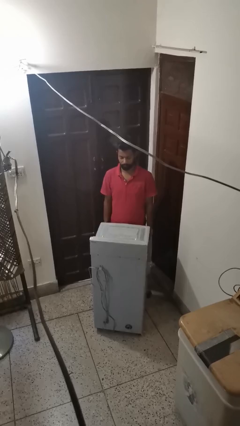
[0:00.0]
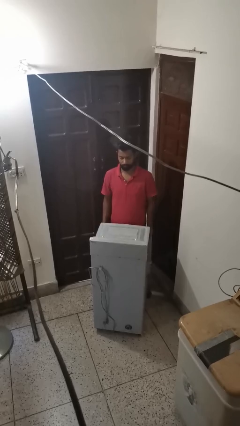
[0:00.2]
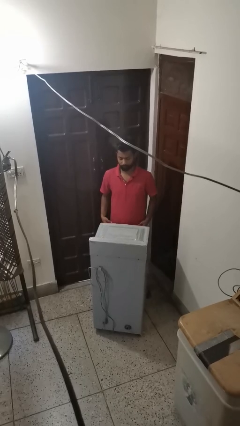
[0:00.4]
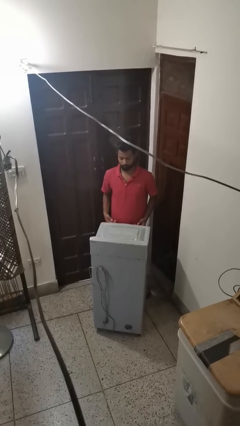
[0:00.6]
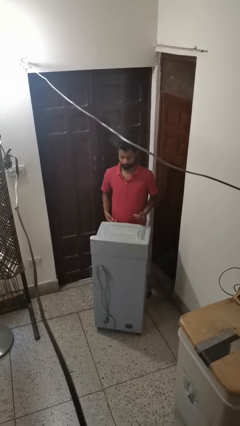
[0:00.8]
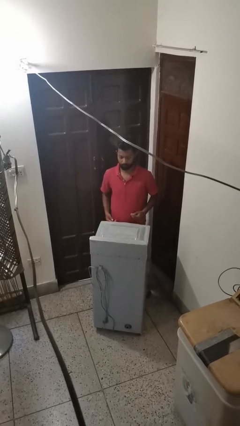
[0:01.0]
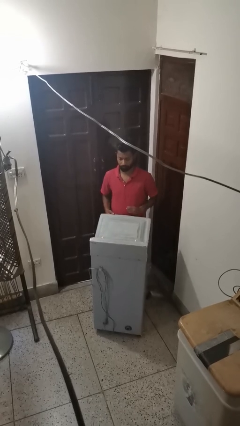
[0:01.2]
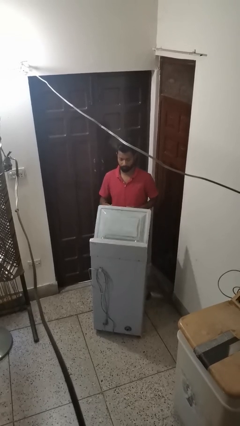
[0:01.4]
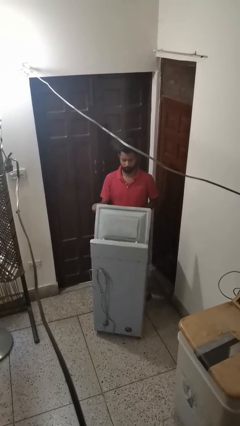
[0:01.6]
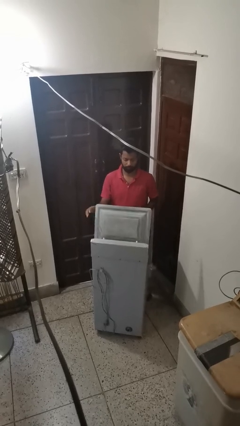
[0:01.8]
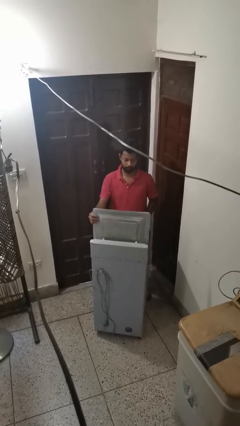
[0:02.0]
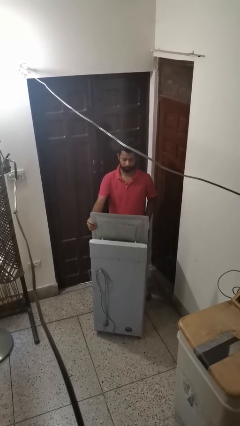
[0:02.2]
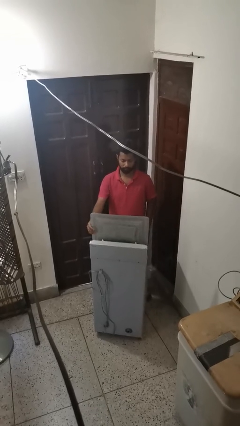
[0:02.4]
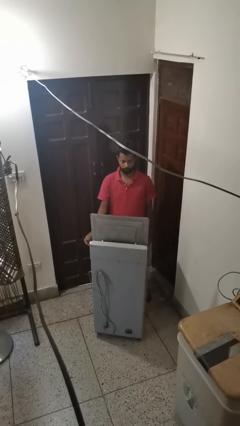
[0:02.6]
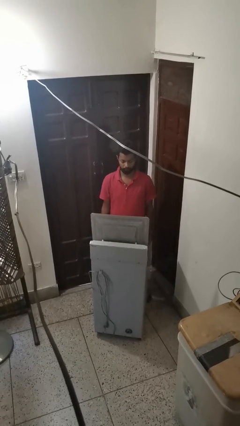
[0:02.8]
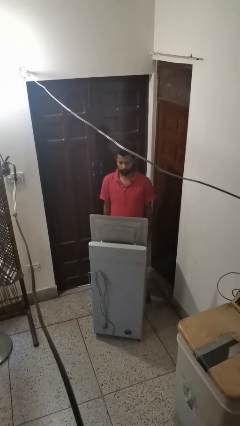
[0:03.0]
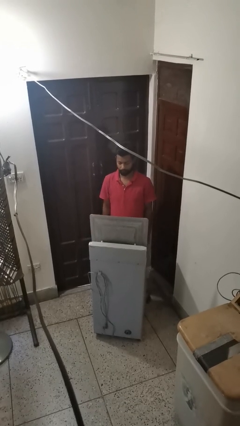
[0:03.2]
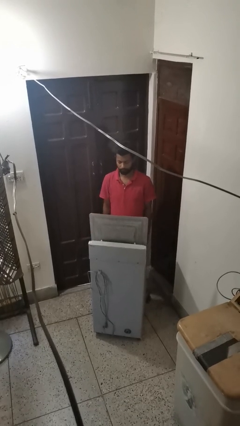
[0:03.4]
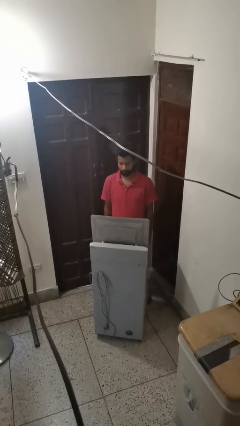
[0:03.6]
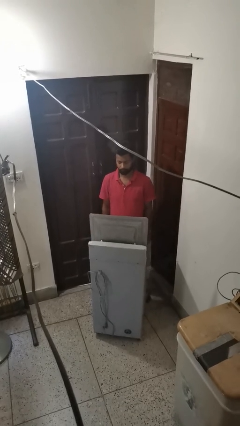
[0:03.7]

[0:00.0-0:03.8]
person opens clothes washer

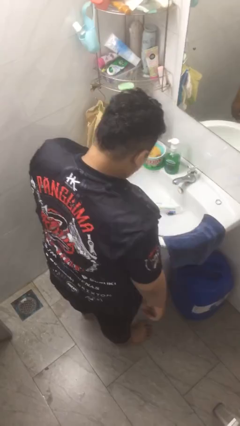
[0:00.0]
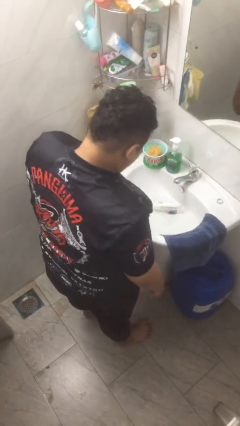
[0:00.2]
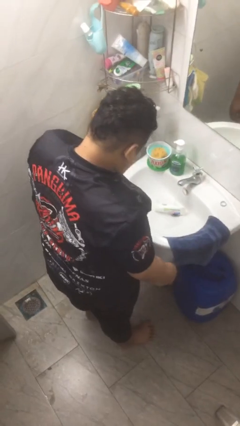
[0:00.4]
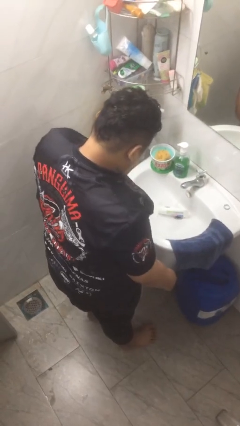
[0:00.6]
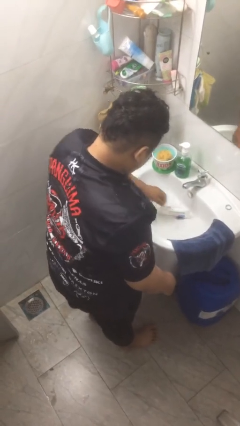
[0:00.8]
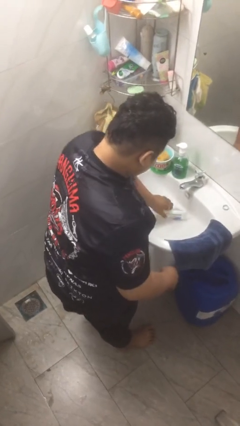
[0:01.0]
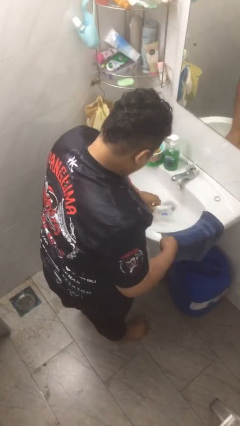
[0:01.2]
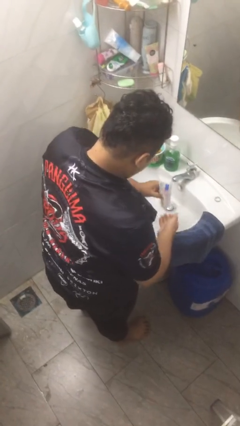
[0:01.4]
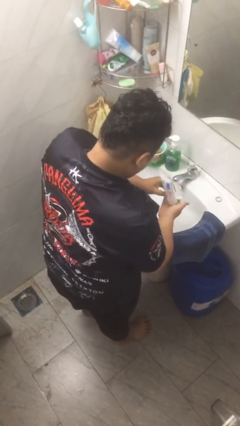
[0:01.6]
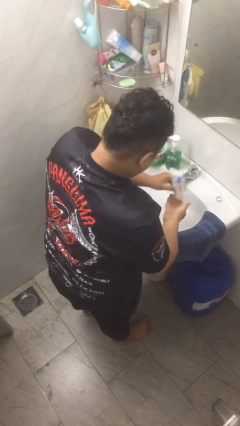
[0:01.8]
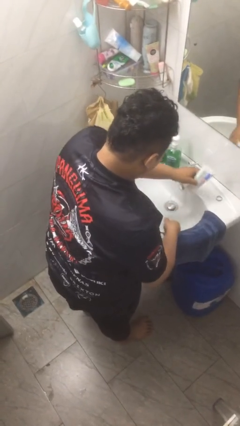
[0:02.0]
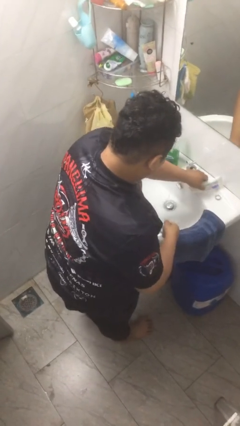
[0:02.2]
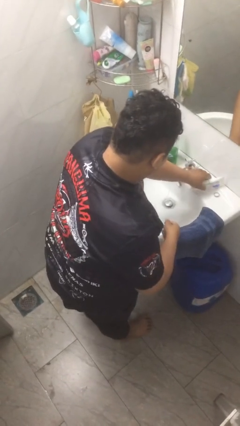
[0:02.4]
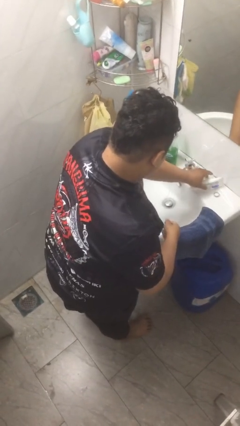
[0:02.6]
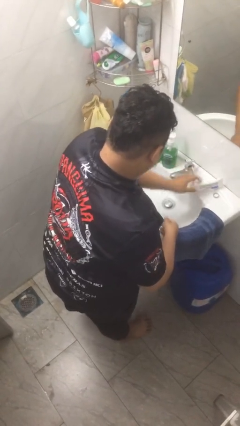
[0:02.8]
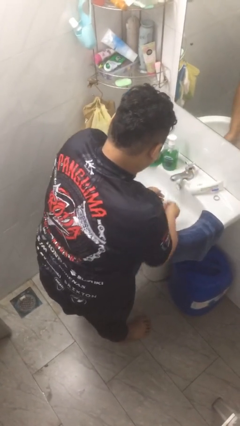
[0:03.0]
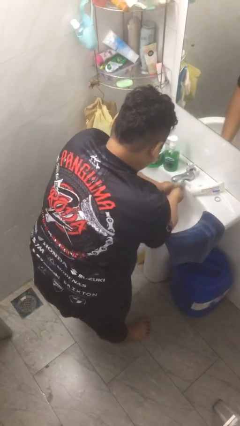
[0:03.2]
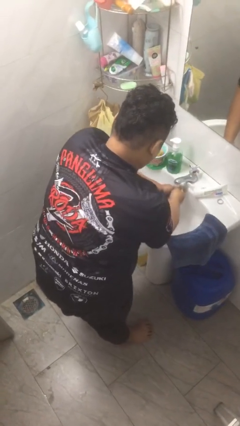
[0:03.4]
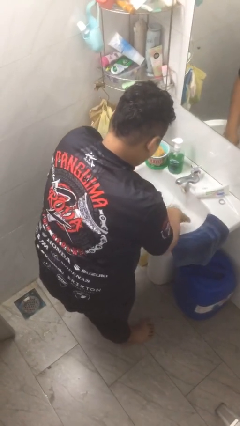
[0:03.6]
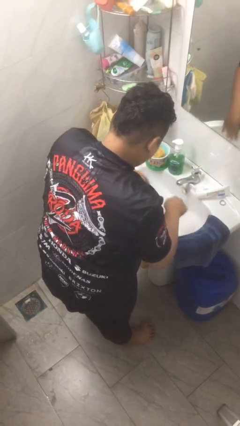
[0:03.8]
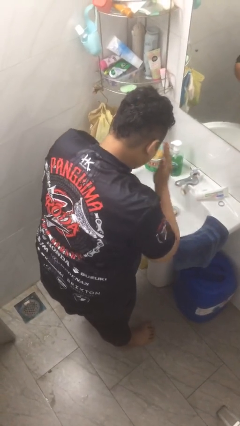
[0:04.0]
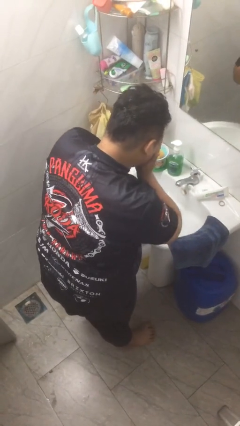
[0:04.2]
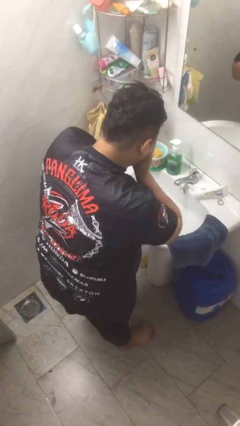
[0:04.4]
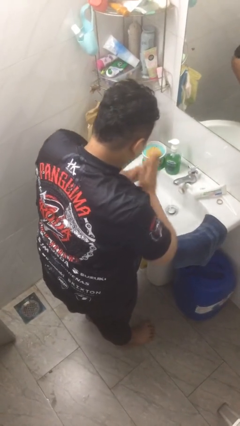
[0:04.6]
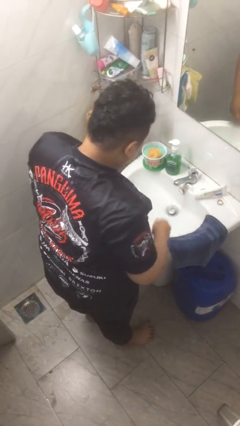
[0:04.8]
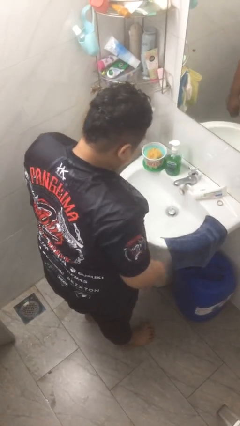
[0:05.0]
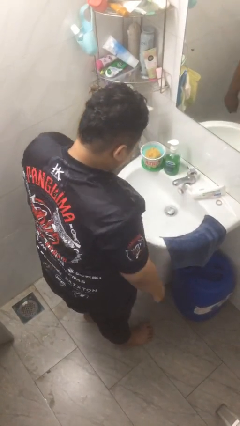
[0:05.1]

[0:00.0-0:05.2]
person washes face

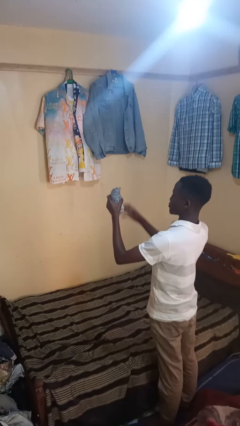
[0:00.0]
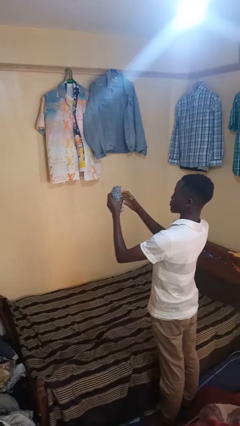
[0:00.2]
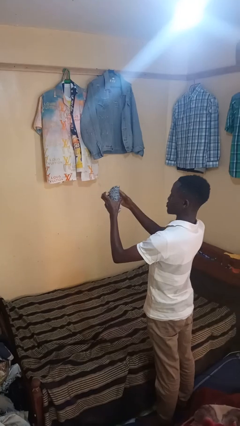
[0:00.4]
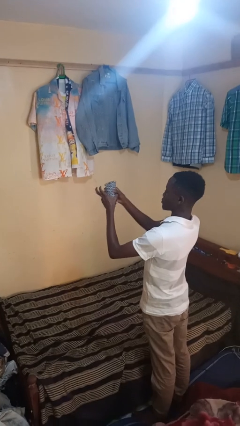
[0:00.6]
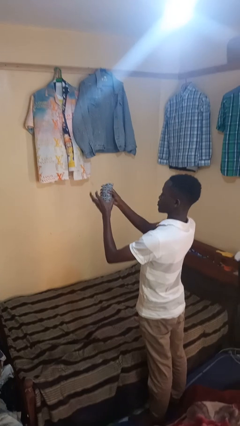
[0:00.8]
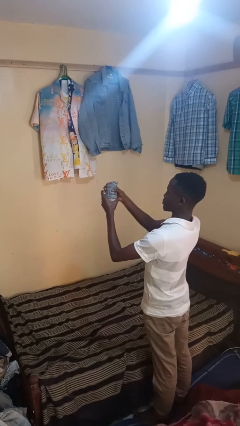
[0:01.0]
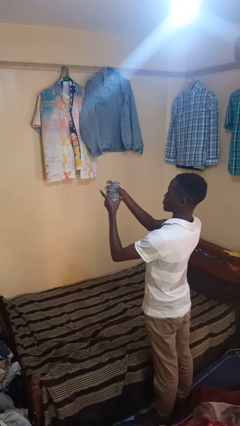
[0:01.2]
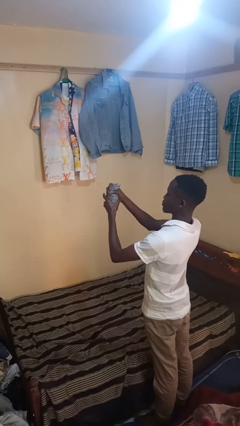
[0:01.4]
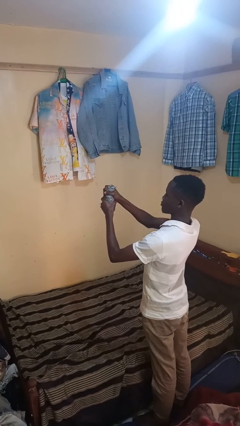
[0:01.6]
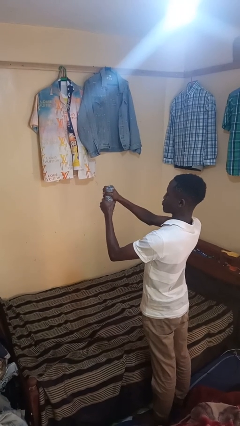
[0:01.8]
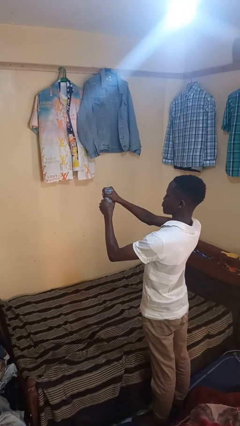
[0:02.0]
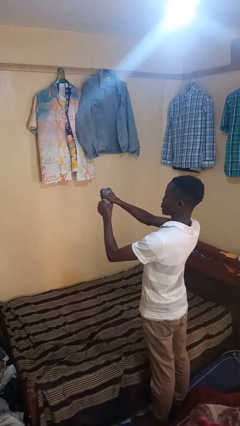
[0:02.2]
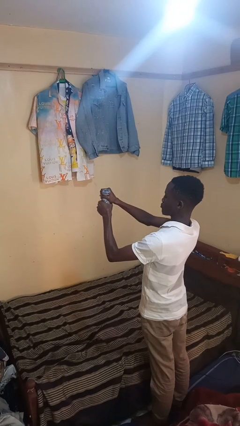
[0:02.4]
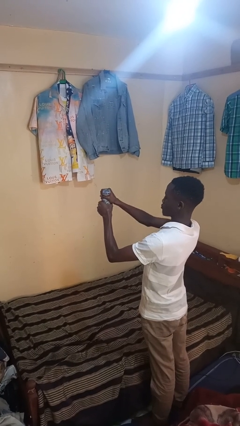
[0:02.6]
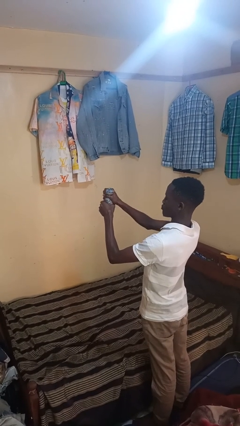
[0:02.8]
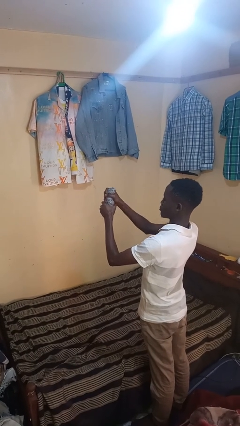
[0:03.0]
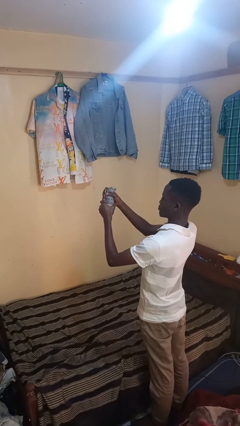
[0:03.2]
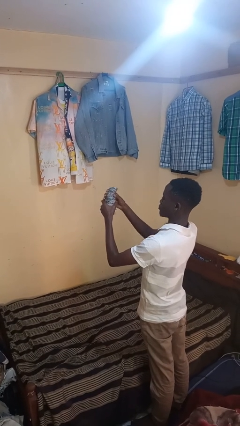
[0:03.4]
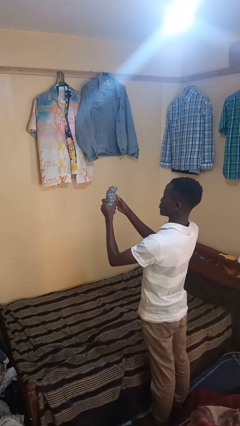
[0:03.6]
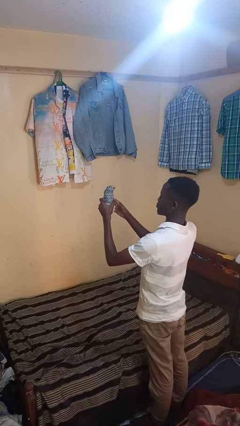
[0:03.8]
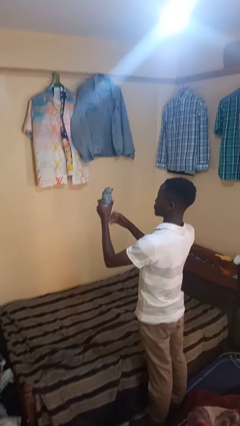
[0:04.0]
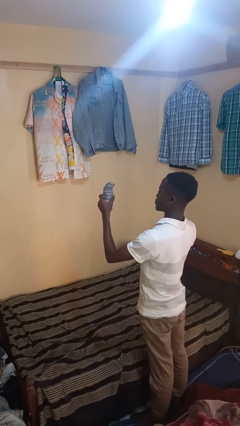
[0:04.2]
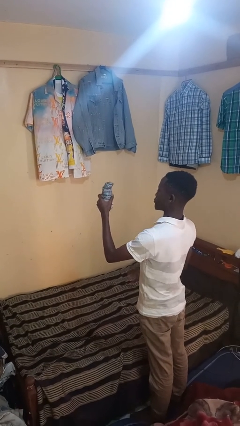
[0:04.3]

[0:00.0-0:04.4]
person squeezes object

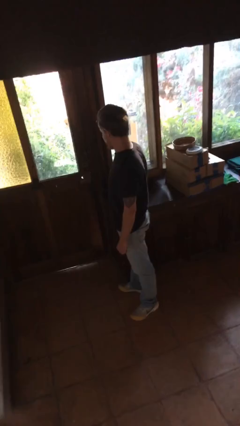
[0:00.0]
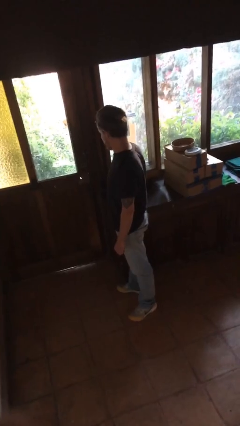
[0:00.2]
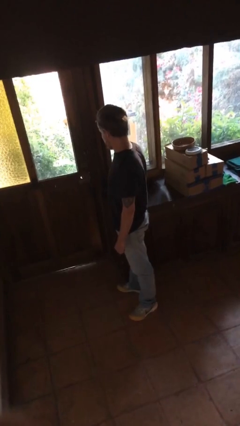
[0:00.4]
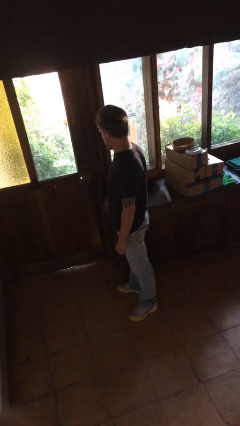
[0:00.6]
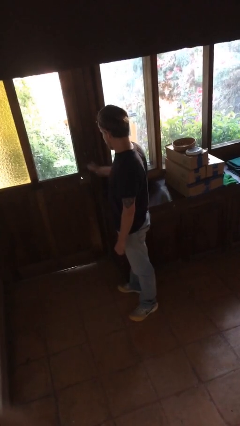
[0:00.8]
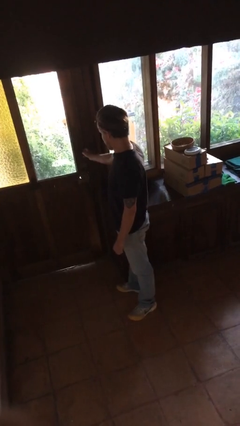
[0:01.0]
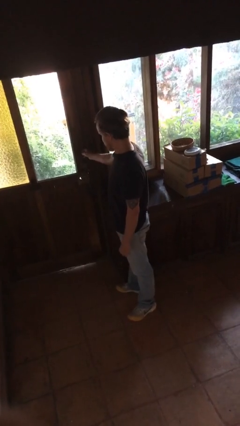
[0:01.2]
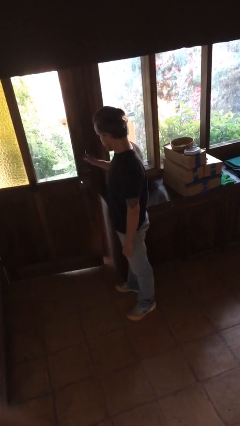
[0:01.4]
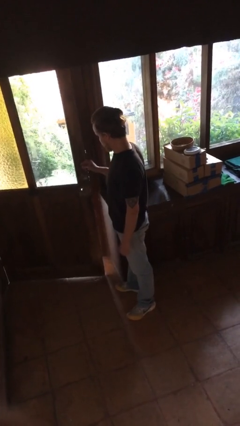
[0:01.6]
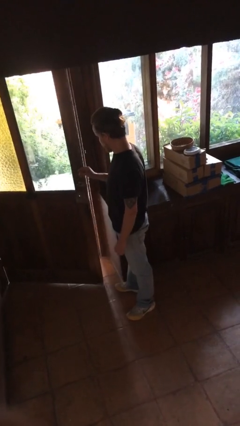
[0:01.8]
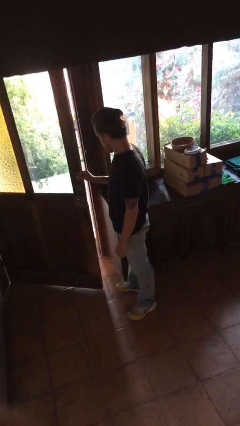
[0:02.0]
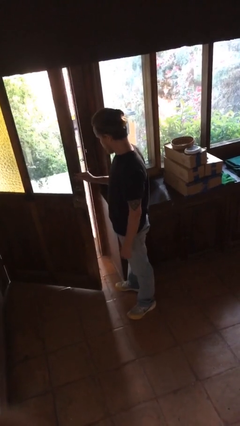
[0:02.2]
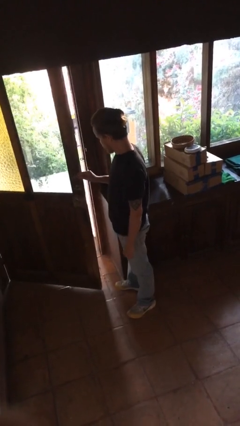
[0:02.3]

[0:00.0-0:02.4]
person opens facility door

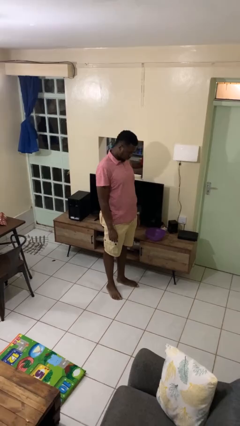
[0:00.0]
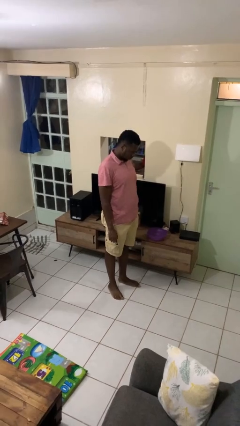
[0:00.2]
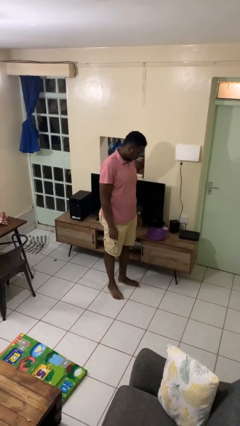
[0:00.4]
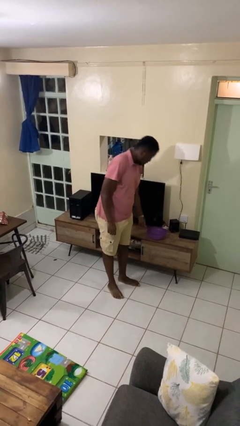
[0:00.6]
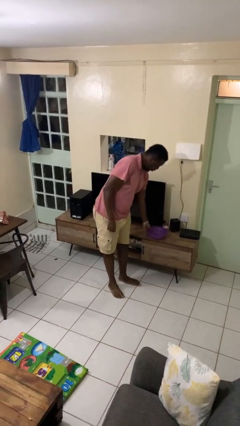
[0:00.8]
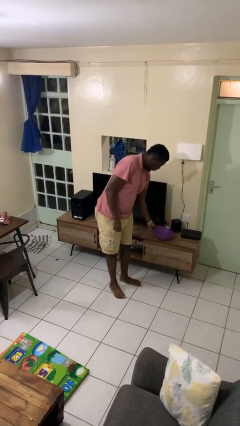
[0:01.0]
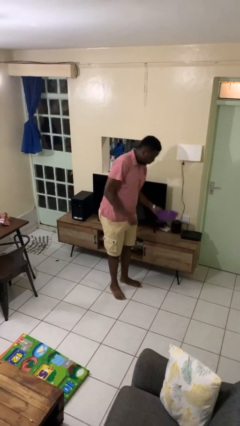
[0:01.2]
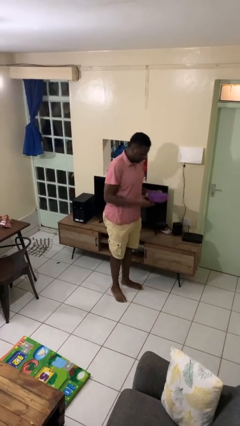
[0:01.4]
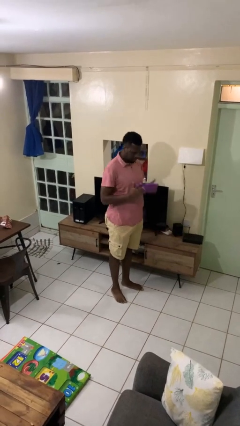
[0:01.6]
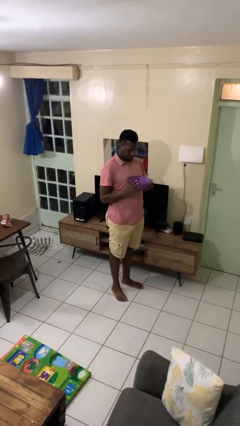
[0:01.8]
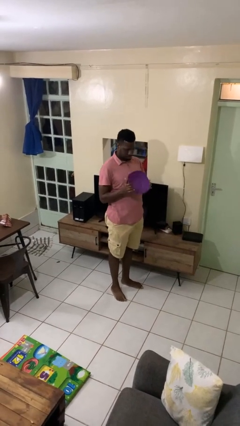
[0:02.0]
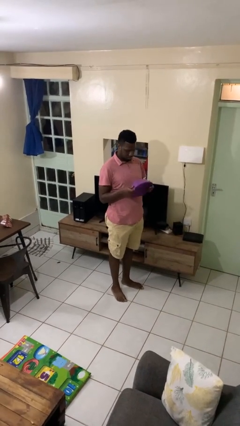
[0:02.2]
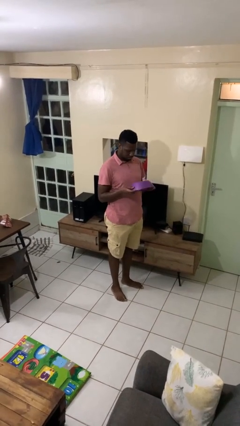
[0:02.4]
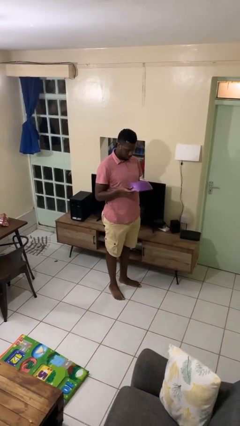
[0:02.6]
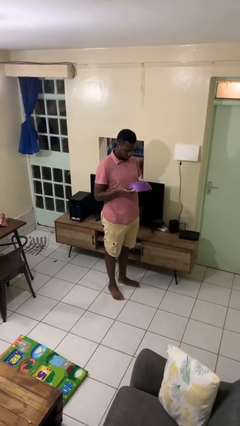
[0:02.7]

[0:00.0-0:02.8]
person picks up object from countertop
